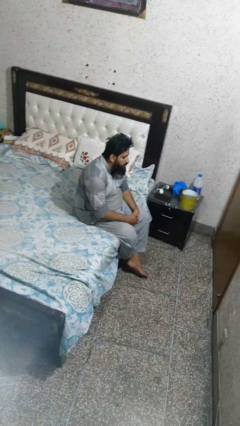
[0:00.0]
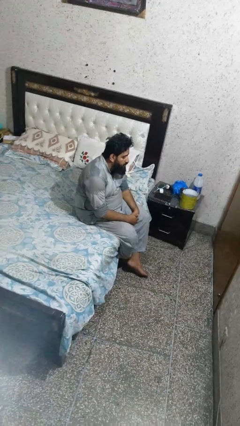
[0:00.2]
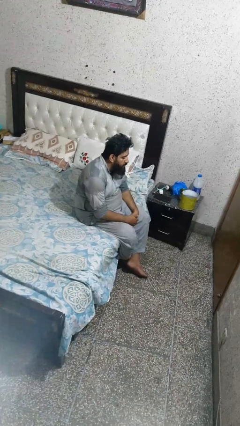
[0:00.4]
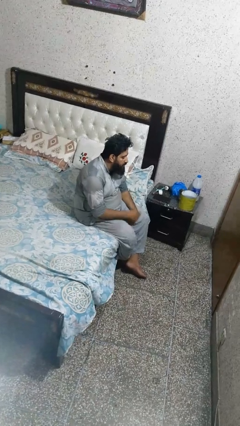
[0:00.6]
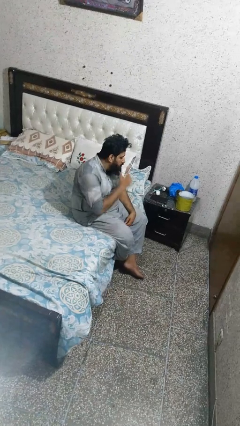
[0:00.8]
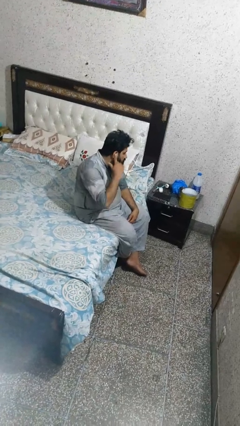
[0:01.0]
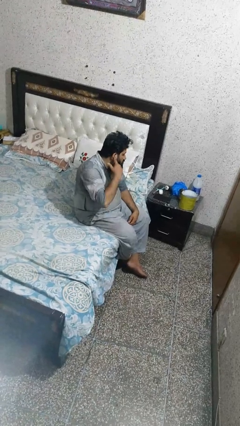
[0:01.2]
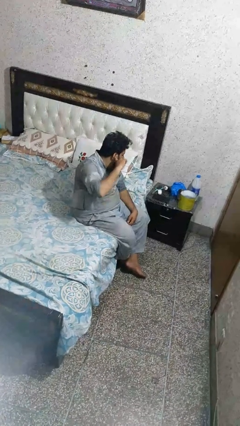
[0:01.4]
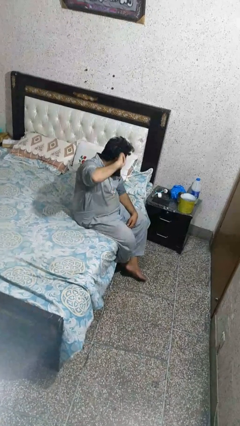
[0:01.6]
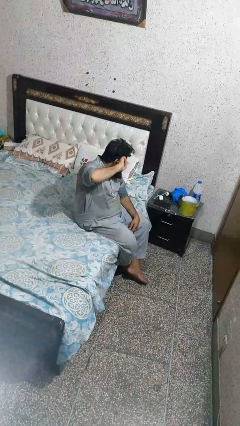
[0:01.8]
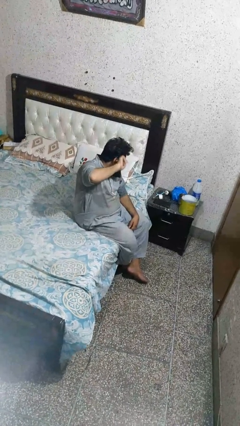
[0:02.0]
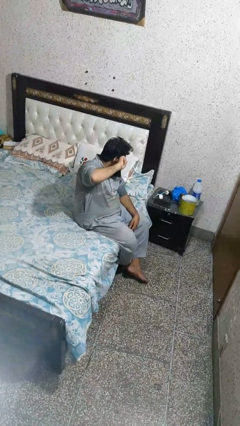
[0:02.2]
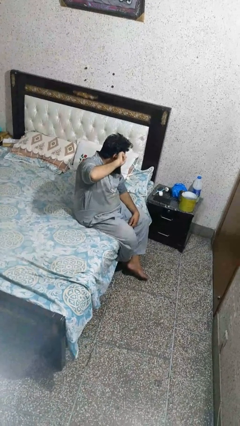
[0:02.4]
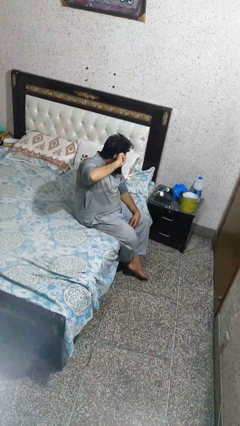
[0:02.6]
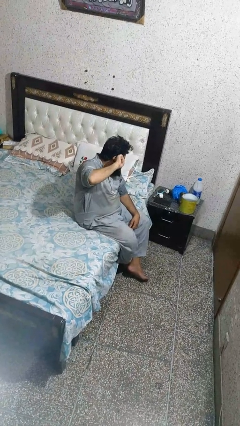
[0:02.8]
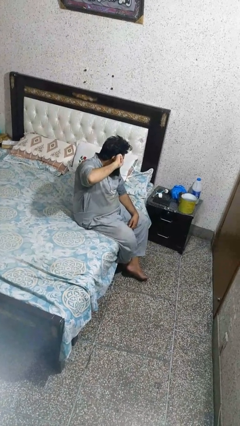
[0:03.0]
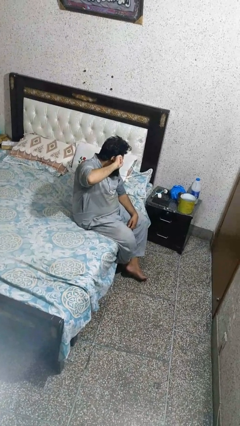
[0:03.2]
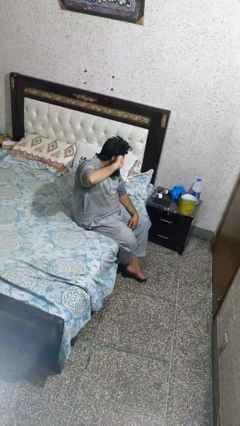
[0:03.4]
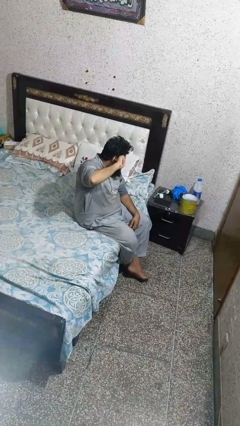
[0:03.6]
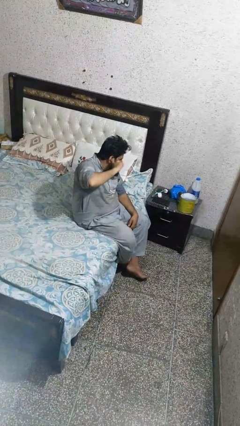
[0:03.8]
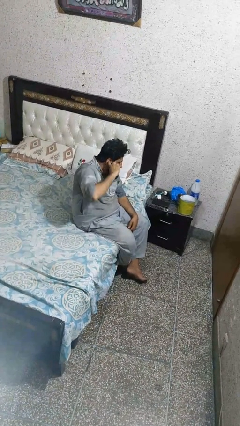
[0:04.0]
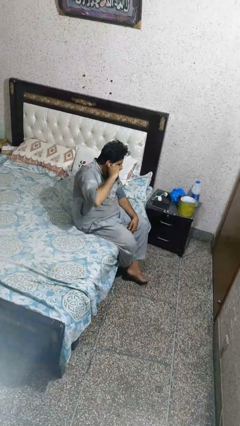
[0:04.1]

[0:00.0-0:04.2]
person puts fingers in ear

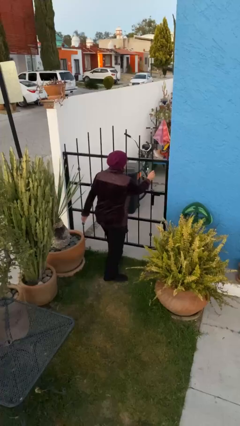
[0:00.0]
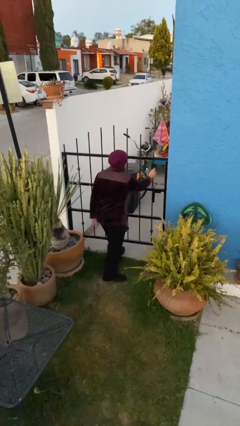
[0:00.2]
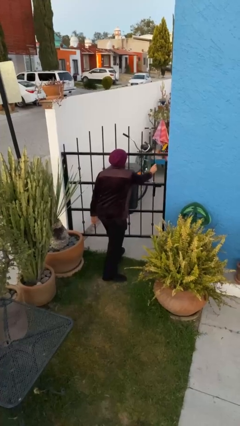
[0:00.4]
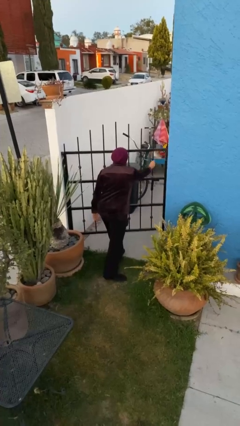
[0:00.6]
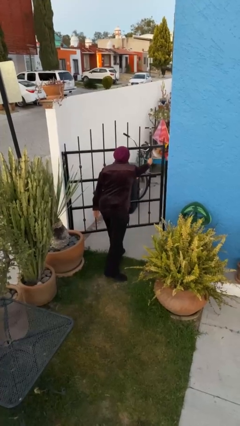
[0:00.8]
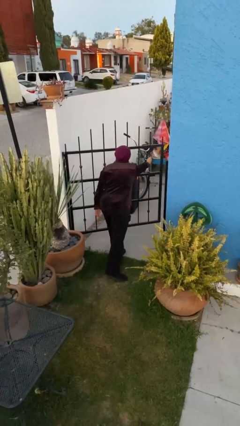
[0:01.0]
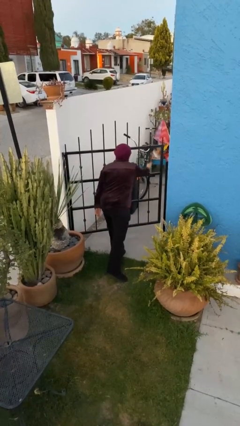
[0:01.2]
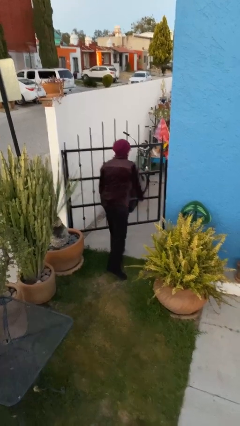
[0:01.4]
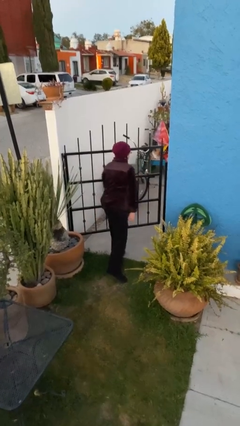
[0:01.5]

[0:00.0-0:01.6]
person opens facility door

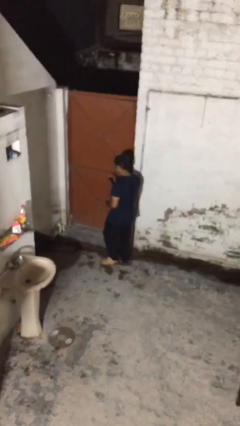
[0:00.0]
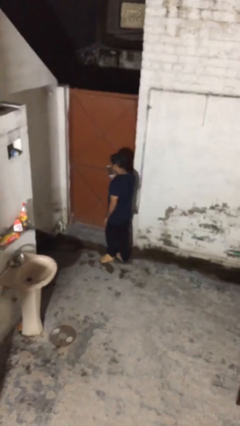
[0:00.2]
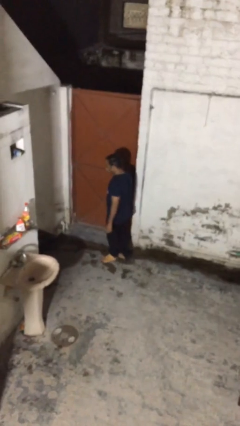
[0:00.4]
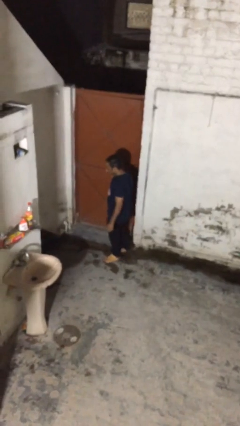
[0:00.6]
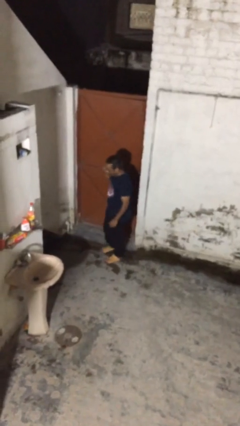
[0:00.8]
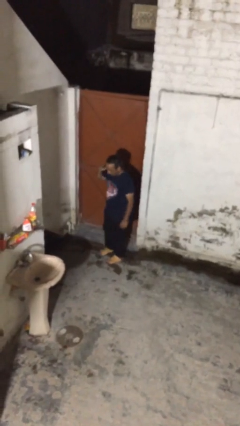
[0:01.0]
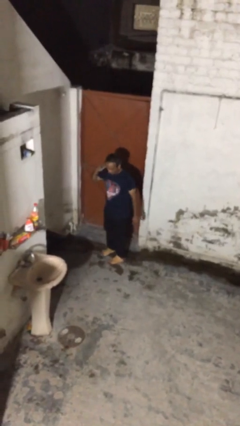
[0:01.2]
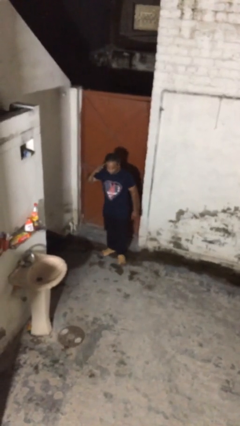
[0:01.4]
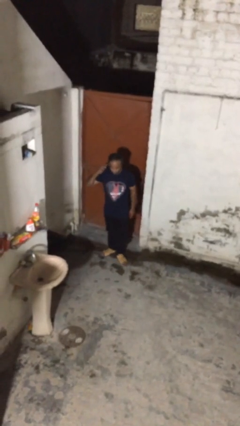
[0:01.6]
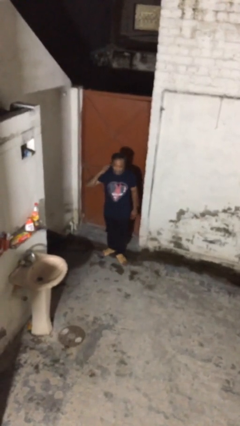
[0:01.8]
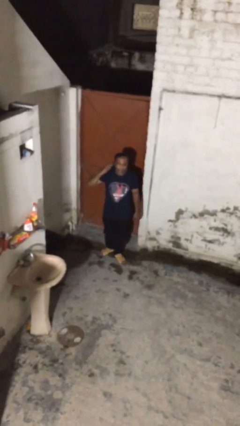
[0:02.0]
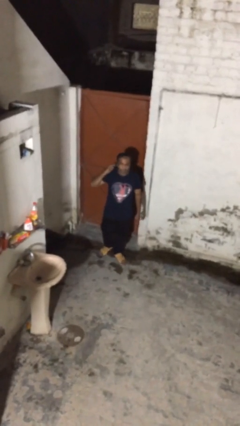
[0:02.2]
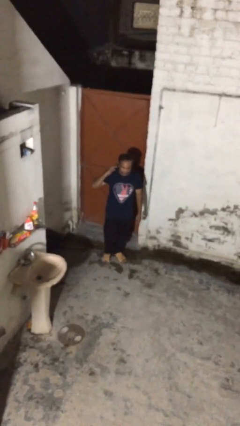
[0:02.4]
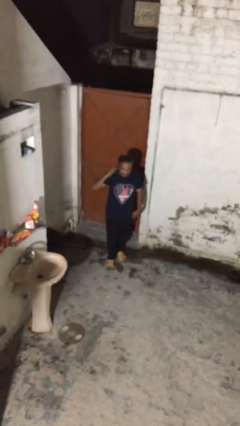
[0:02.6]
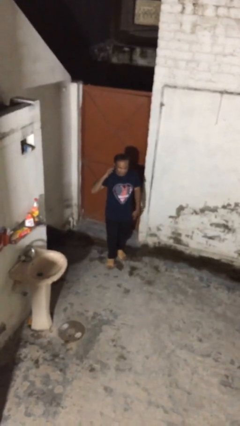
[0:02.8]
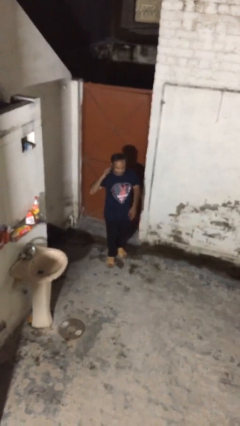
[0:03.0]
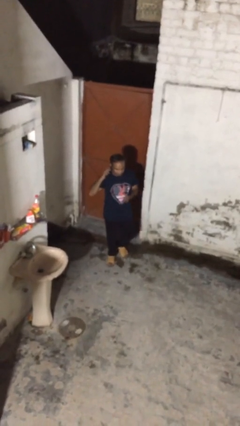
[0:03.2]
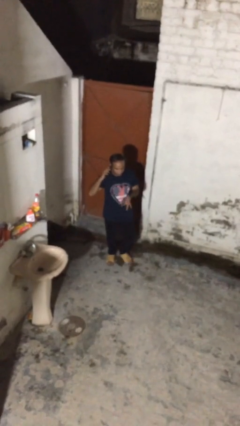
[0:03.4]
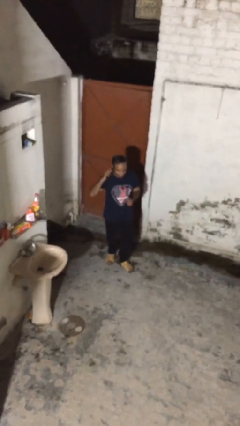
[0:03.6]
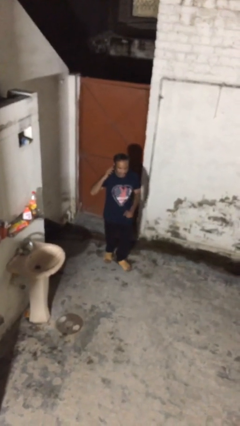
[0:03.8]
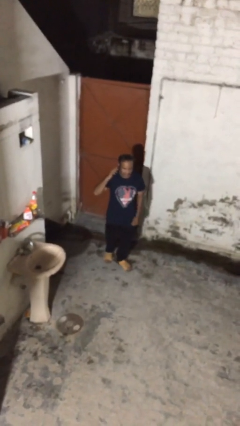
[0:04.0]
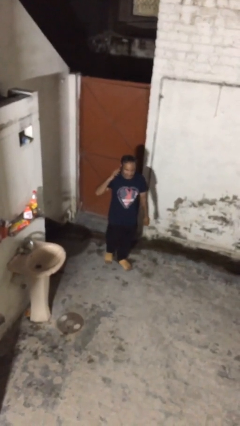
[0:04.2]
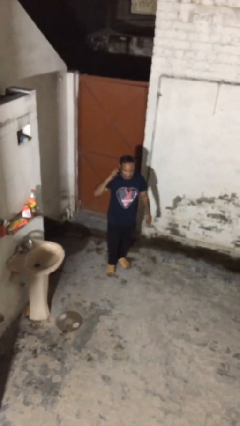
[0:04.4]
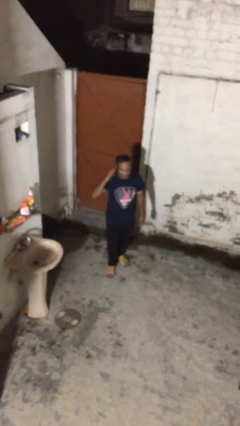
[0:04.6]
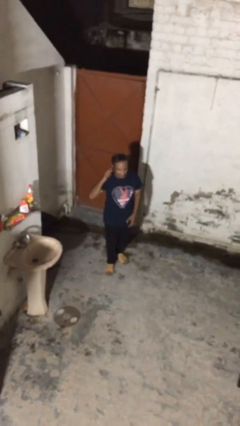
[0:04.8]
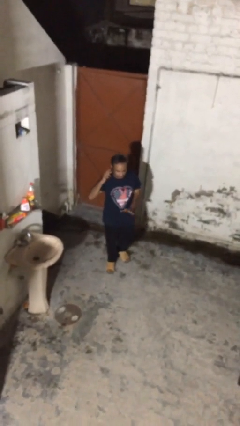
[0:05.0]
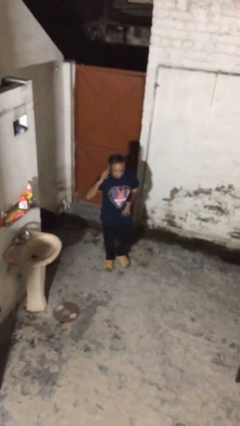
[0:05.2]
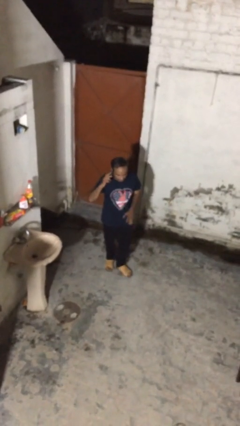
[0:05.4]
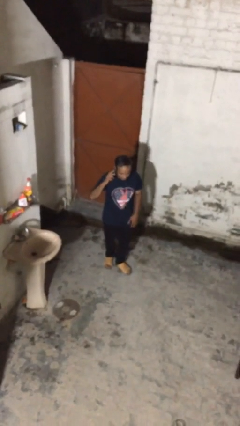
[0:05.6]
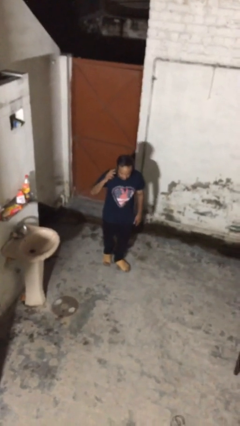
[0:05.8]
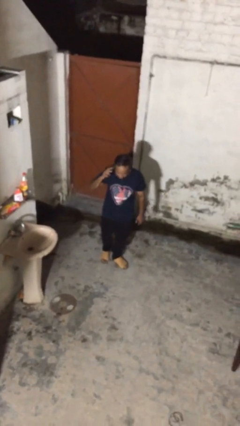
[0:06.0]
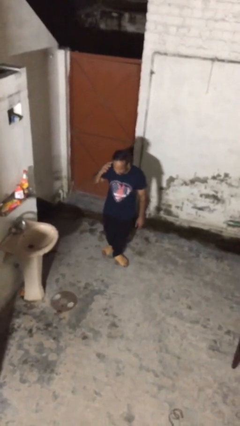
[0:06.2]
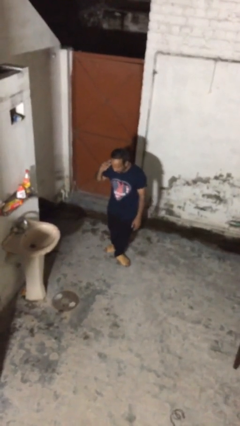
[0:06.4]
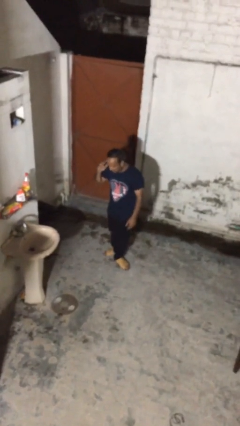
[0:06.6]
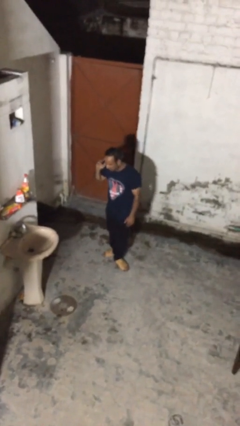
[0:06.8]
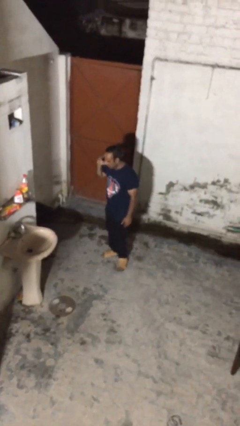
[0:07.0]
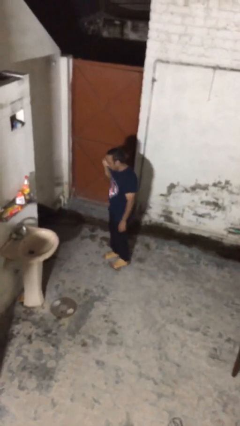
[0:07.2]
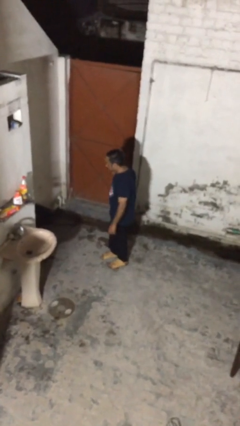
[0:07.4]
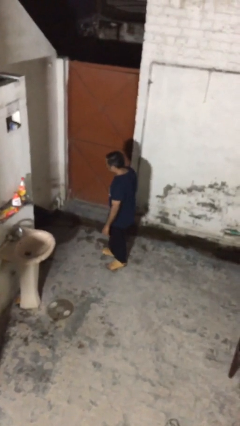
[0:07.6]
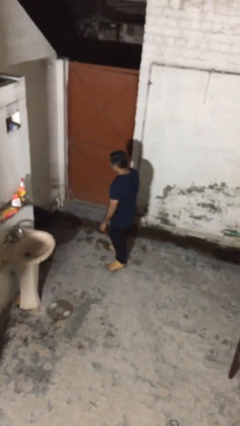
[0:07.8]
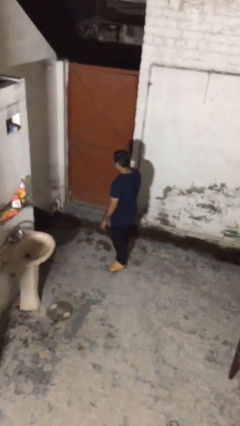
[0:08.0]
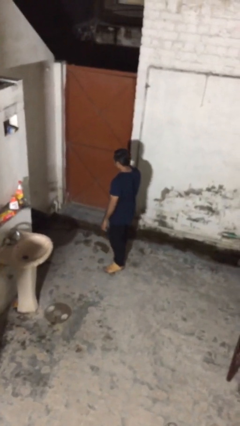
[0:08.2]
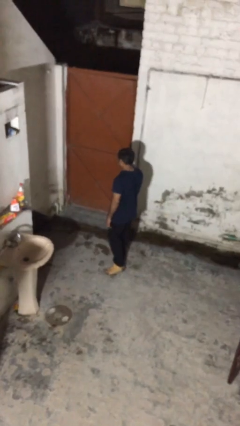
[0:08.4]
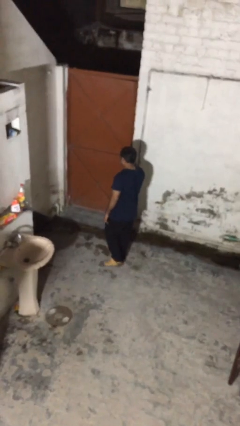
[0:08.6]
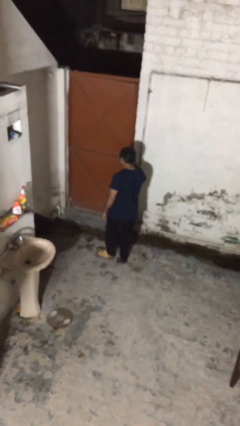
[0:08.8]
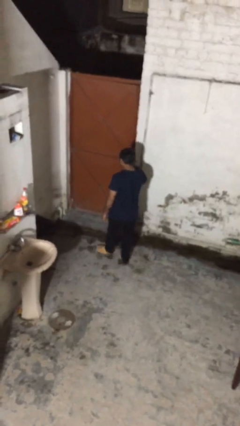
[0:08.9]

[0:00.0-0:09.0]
person talks on phone

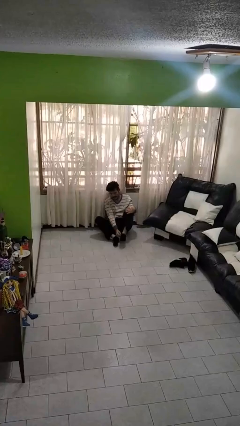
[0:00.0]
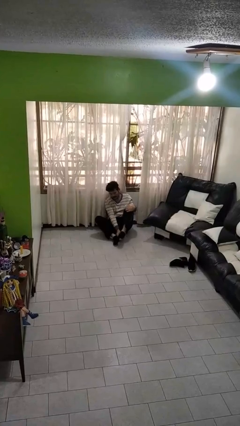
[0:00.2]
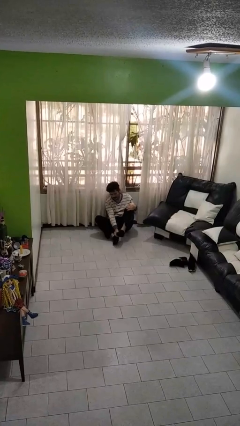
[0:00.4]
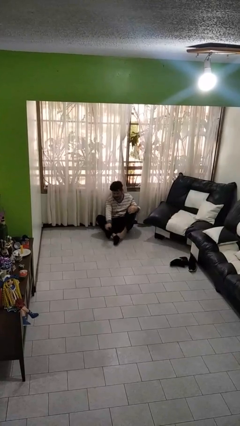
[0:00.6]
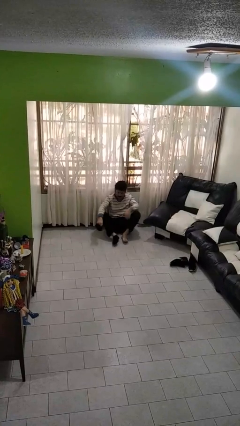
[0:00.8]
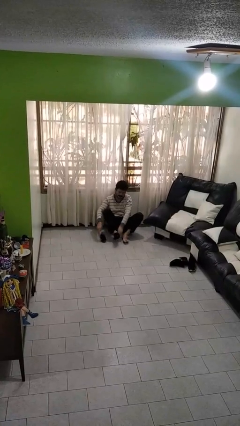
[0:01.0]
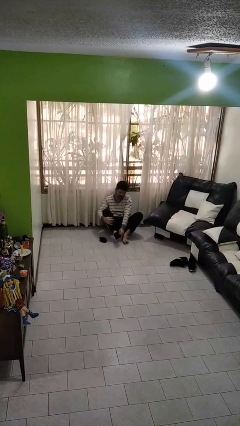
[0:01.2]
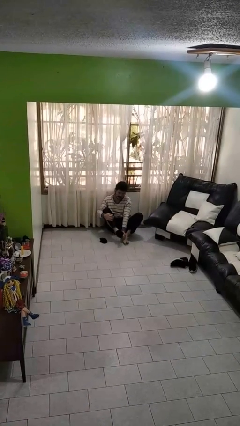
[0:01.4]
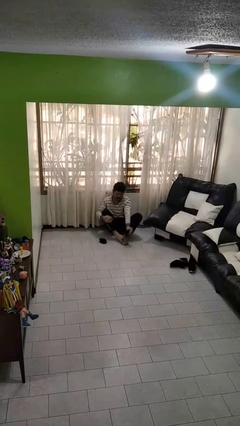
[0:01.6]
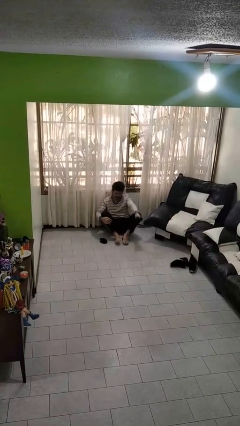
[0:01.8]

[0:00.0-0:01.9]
person takes off socks

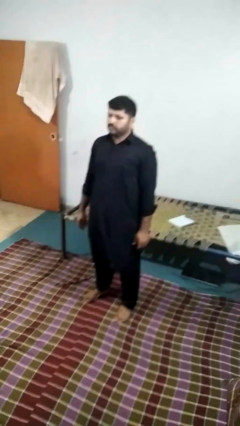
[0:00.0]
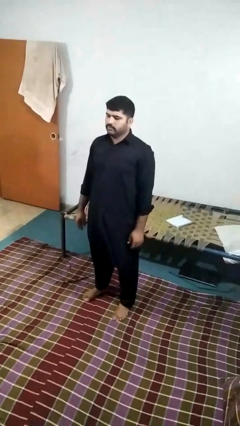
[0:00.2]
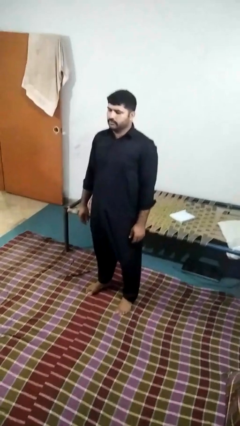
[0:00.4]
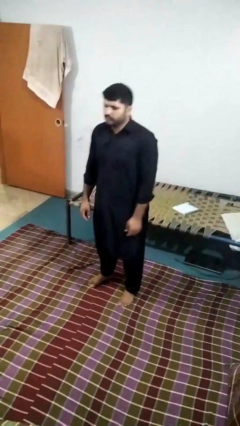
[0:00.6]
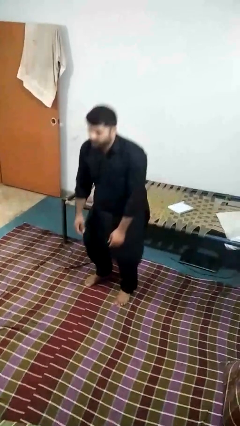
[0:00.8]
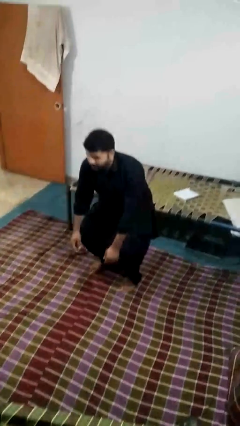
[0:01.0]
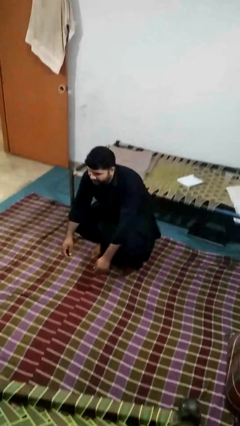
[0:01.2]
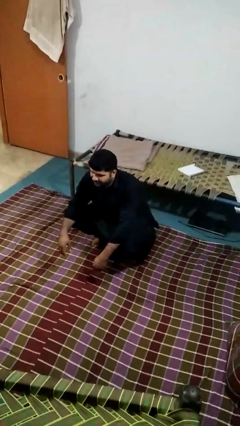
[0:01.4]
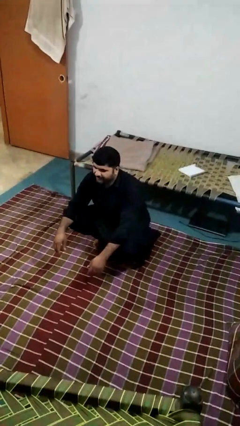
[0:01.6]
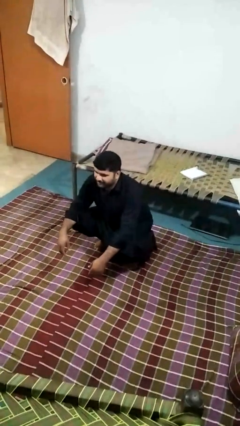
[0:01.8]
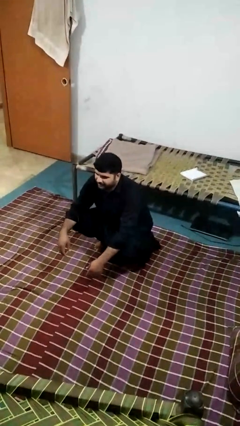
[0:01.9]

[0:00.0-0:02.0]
person squats
